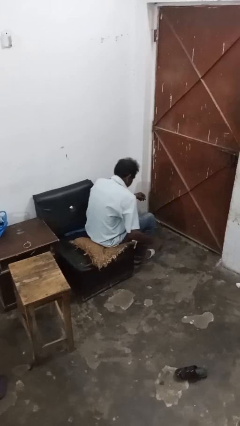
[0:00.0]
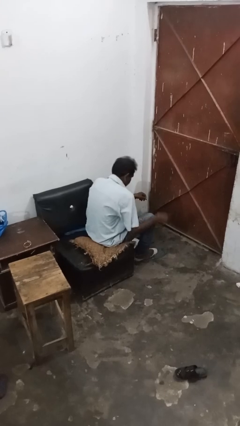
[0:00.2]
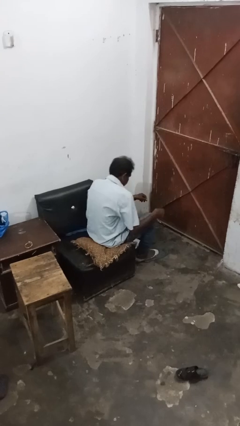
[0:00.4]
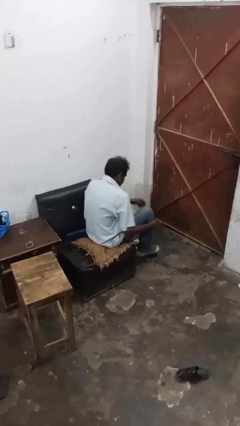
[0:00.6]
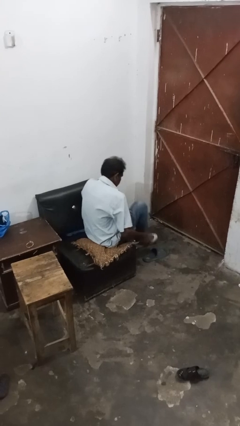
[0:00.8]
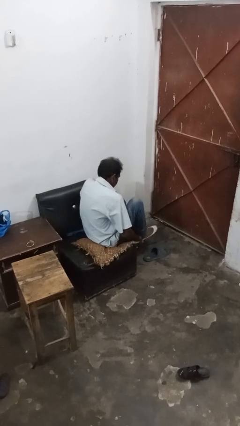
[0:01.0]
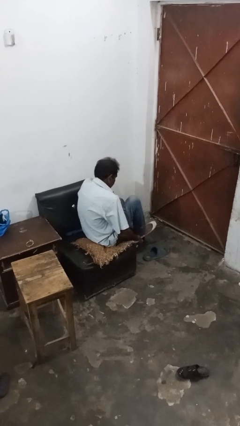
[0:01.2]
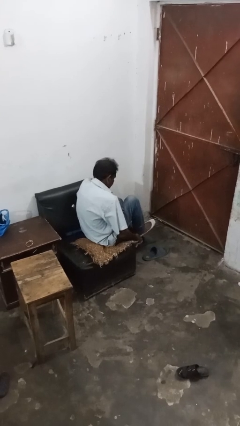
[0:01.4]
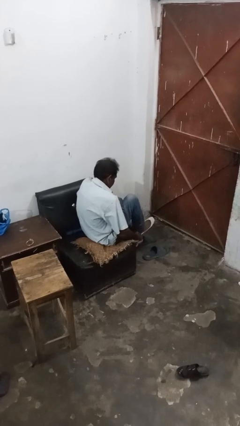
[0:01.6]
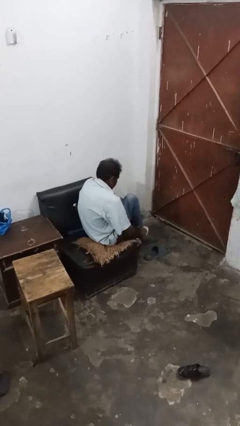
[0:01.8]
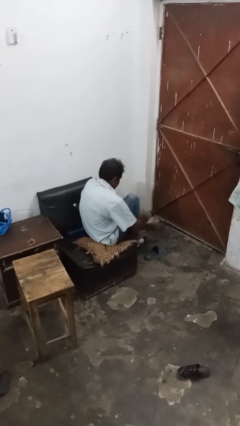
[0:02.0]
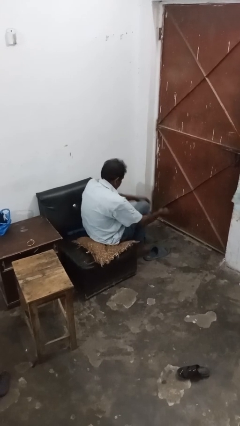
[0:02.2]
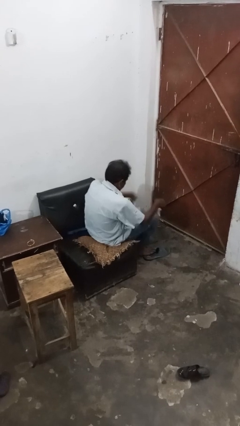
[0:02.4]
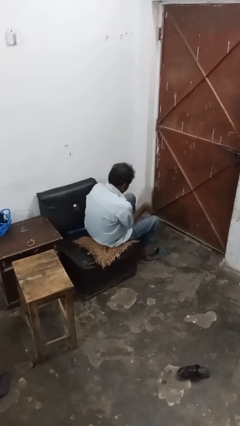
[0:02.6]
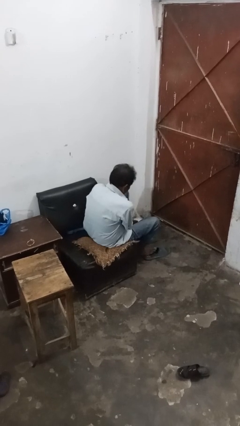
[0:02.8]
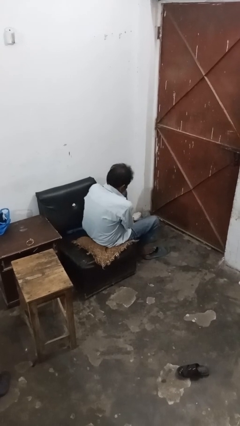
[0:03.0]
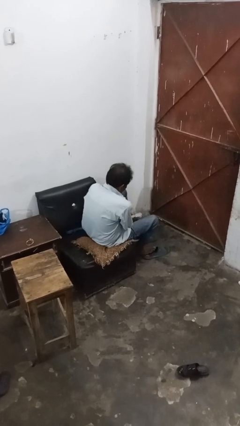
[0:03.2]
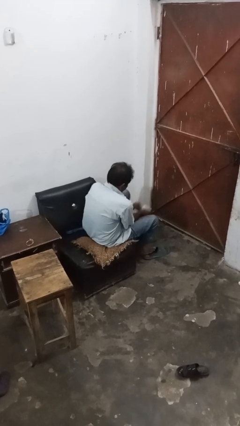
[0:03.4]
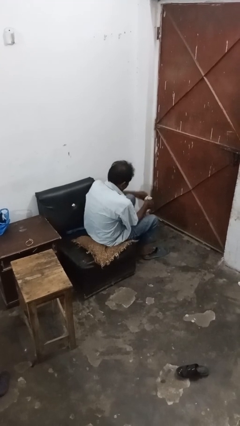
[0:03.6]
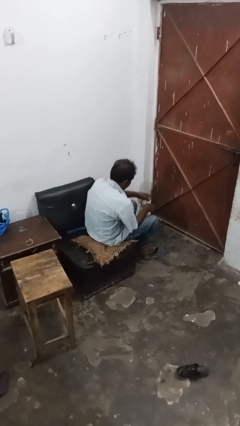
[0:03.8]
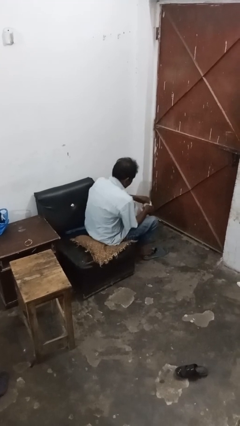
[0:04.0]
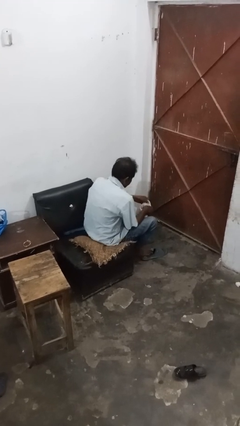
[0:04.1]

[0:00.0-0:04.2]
person takes off socks

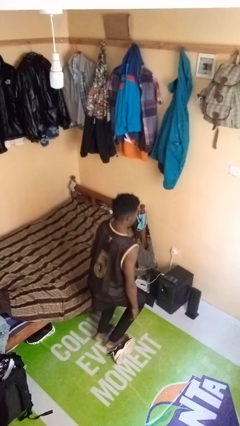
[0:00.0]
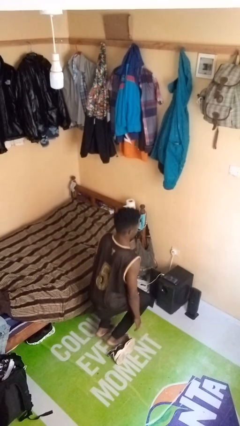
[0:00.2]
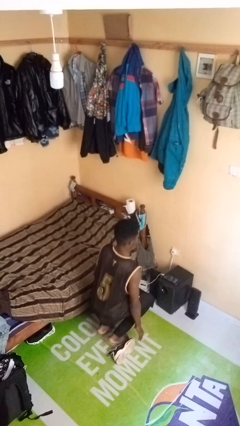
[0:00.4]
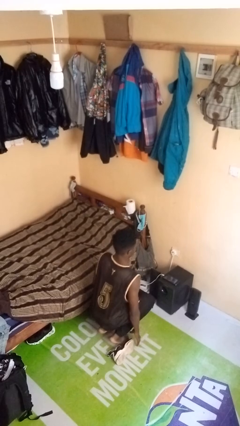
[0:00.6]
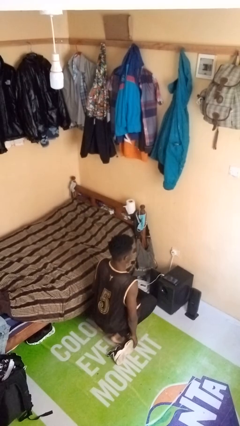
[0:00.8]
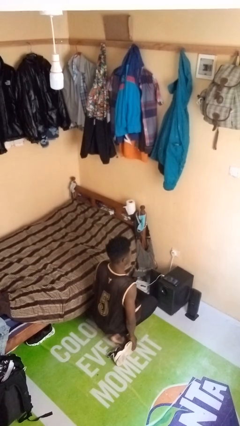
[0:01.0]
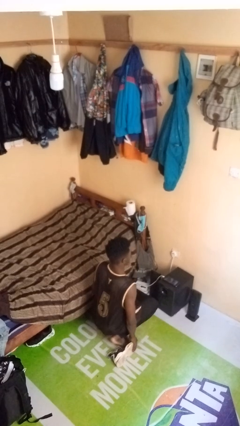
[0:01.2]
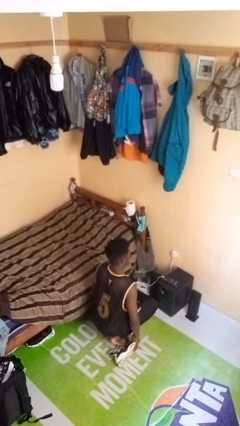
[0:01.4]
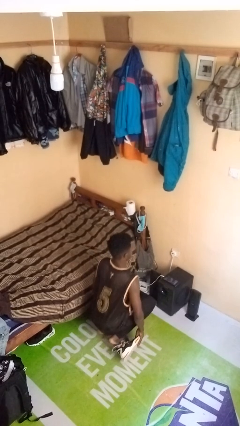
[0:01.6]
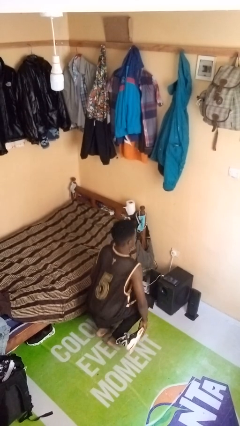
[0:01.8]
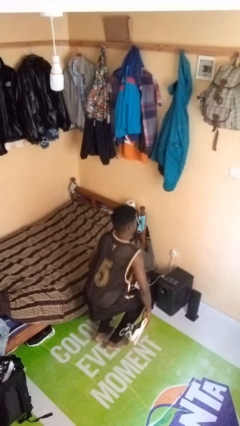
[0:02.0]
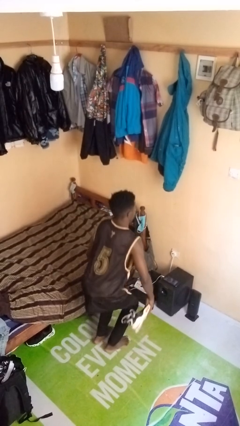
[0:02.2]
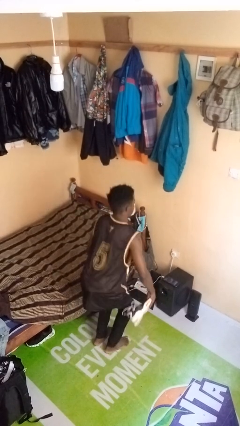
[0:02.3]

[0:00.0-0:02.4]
person picks up object from floor

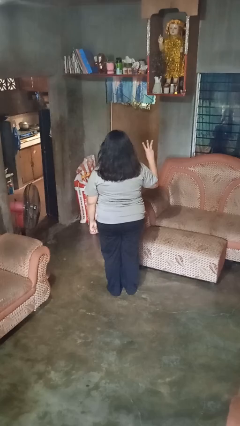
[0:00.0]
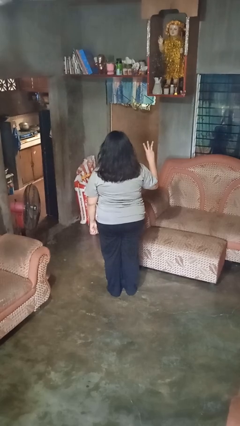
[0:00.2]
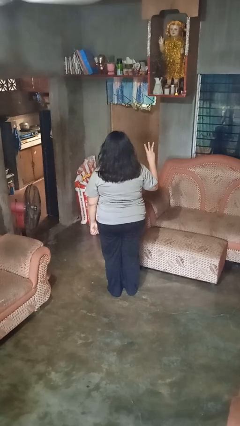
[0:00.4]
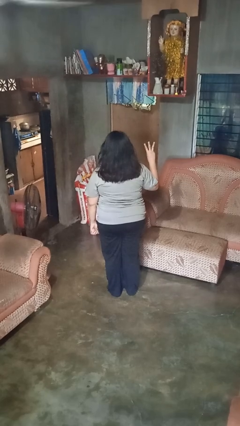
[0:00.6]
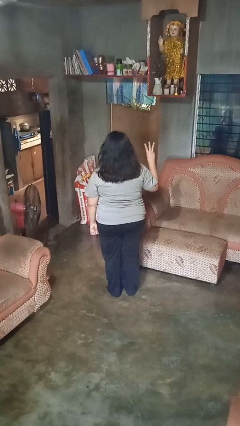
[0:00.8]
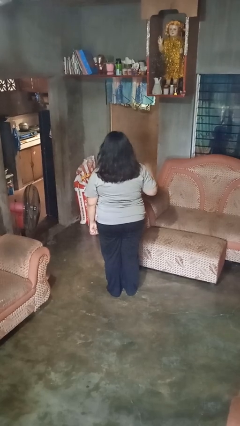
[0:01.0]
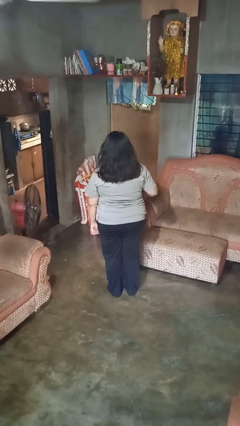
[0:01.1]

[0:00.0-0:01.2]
person gestures number three

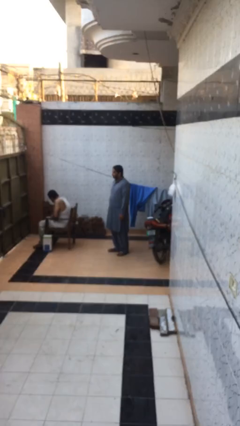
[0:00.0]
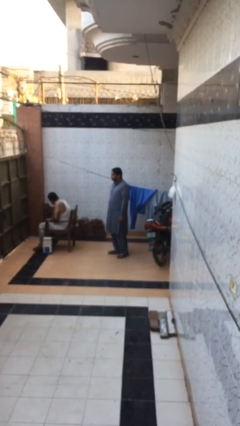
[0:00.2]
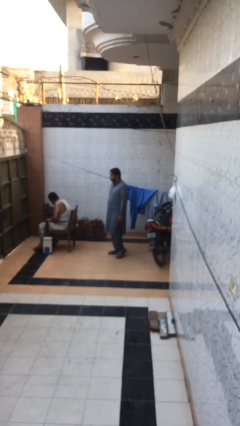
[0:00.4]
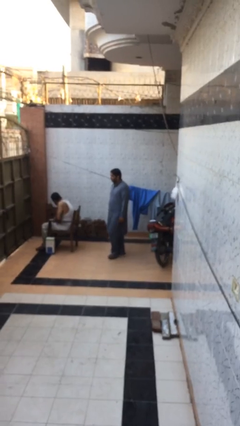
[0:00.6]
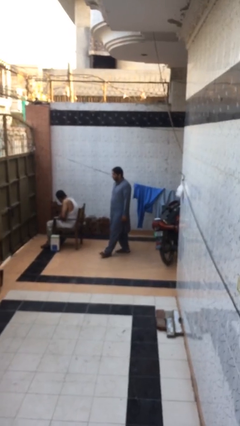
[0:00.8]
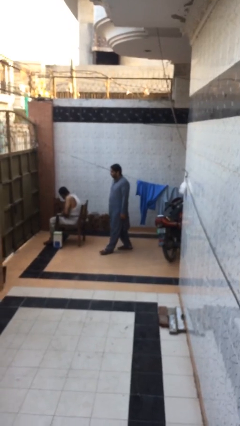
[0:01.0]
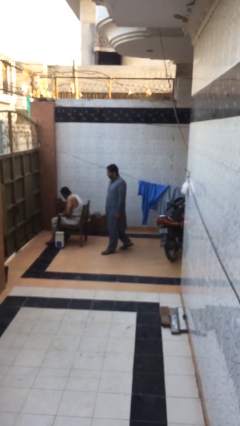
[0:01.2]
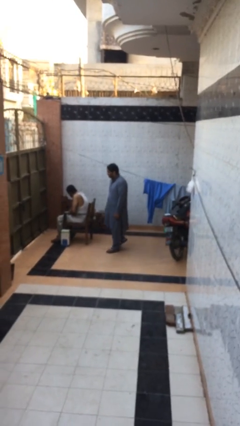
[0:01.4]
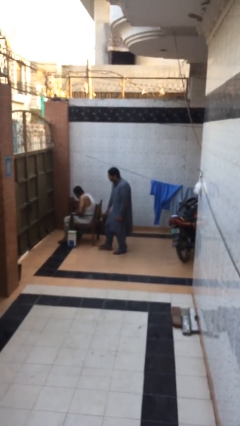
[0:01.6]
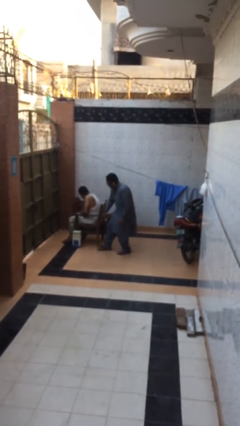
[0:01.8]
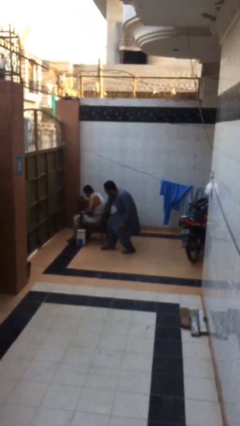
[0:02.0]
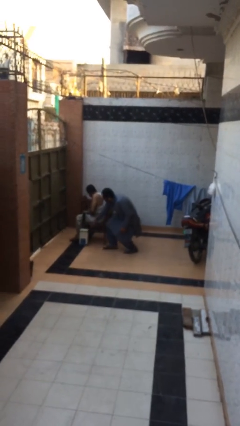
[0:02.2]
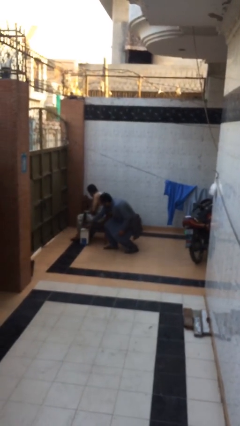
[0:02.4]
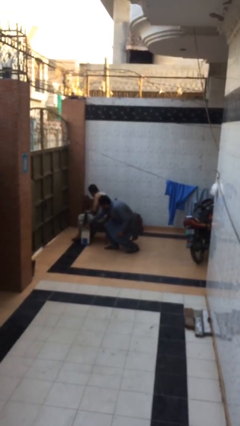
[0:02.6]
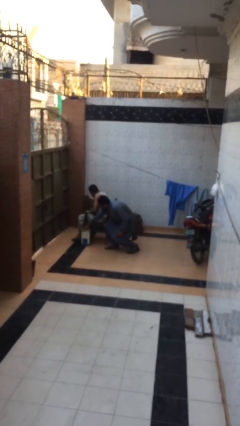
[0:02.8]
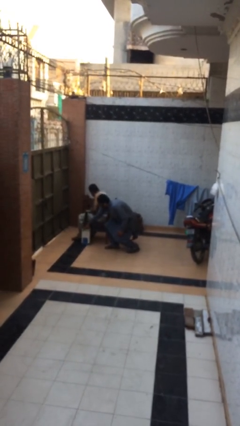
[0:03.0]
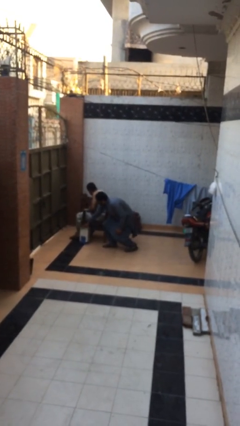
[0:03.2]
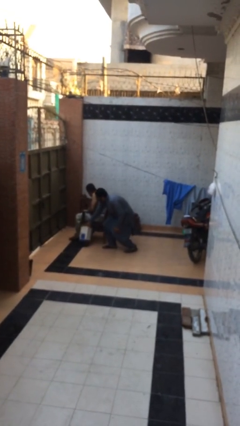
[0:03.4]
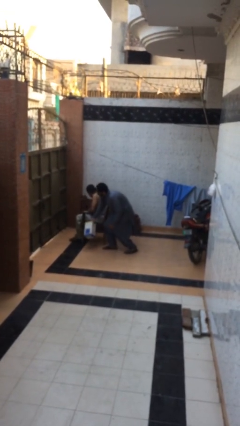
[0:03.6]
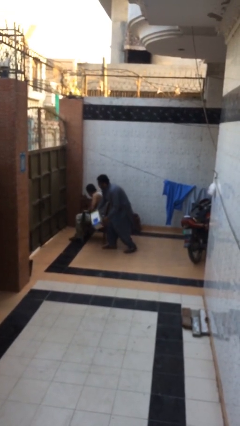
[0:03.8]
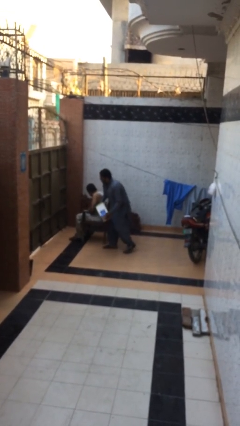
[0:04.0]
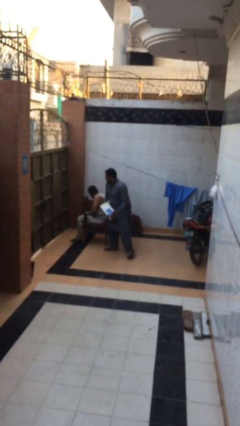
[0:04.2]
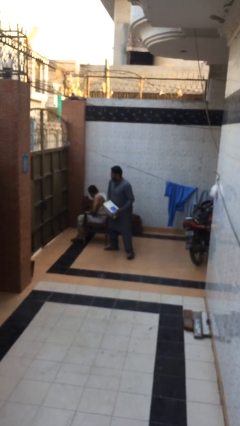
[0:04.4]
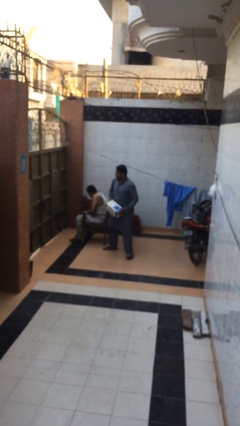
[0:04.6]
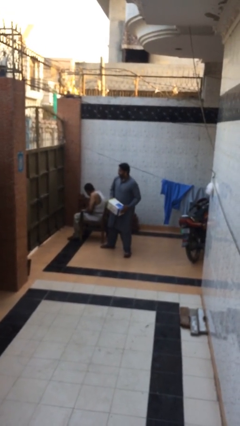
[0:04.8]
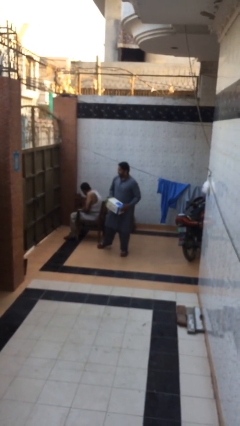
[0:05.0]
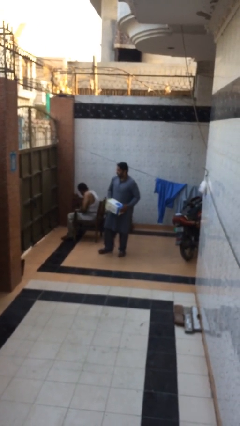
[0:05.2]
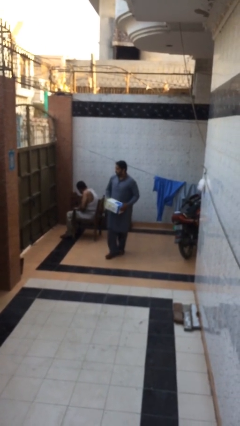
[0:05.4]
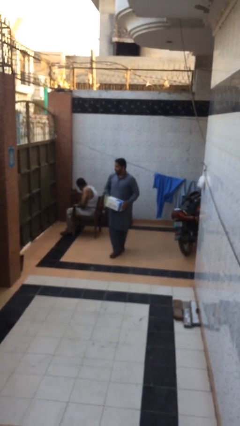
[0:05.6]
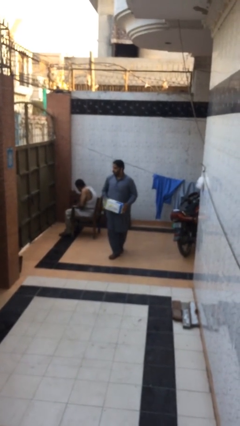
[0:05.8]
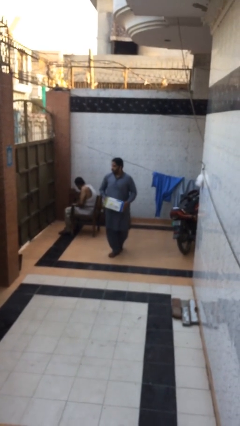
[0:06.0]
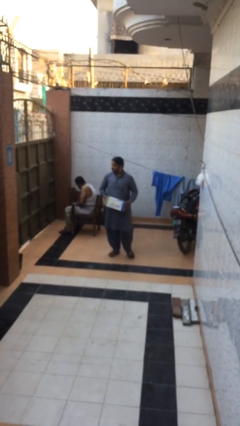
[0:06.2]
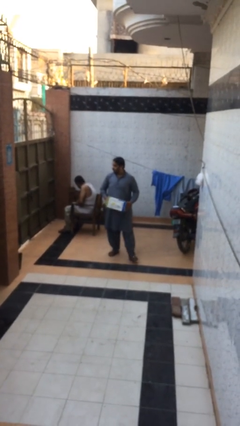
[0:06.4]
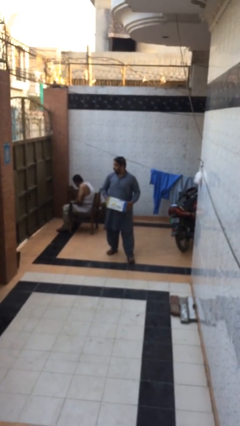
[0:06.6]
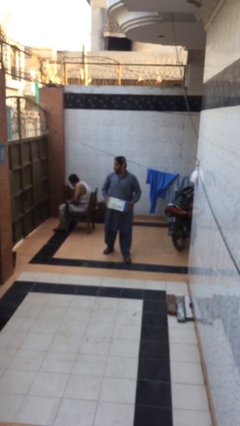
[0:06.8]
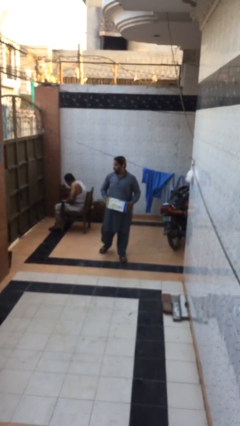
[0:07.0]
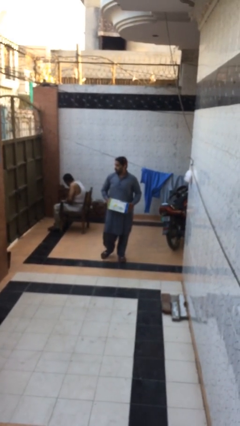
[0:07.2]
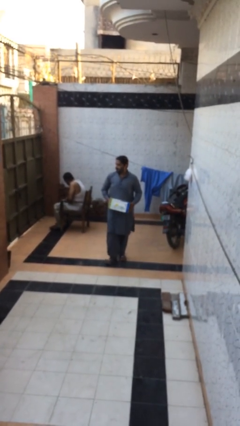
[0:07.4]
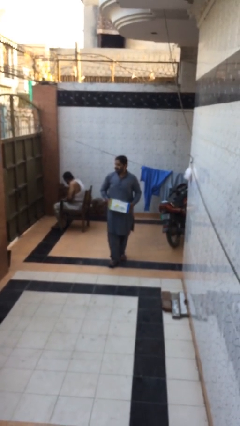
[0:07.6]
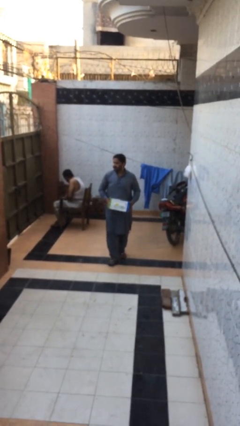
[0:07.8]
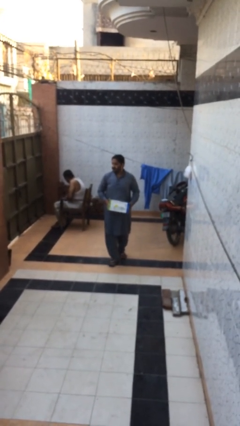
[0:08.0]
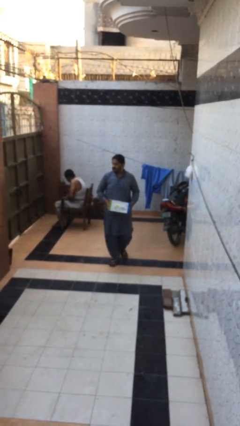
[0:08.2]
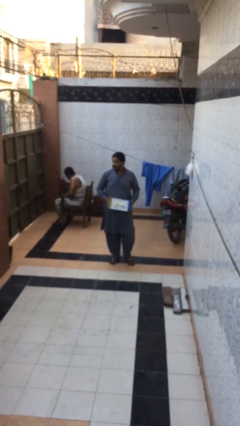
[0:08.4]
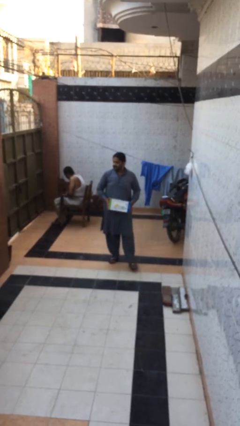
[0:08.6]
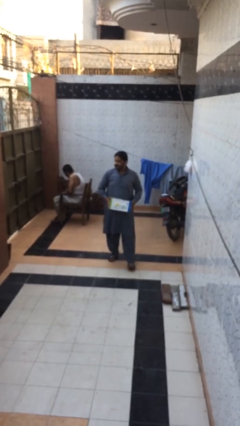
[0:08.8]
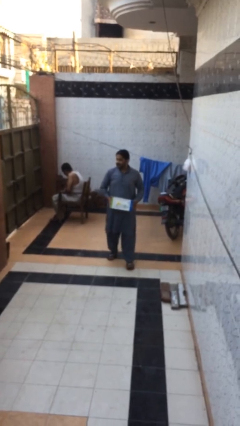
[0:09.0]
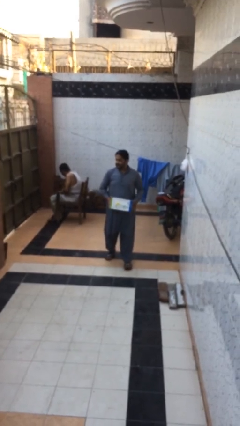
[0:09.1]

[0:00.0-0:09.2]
person steals object from person

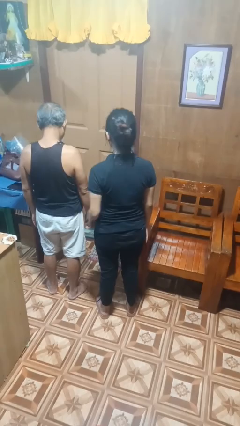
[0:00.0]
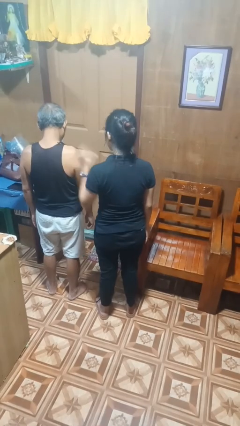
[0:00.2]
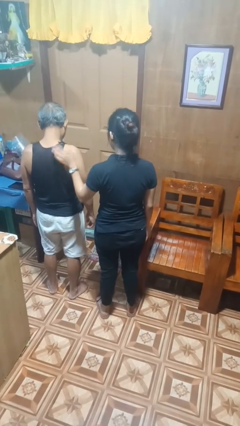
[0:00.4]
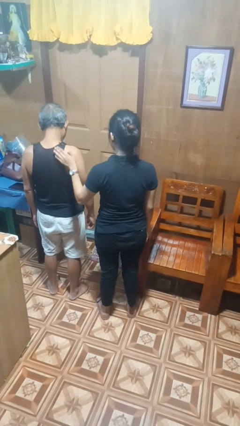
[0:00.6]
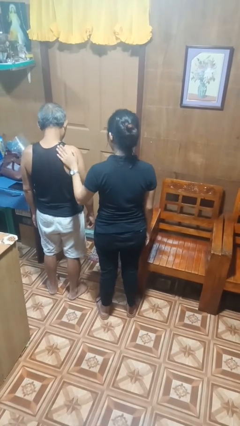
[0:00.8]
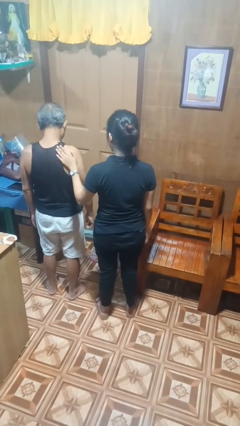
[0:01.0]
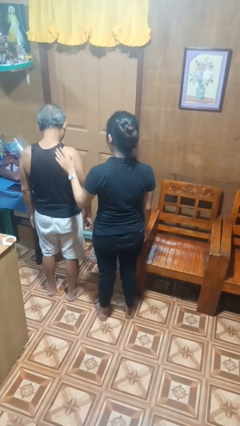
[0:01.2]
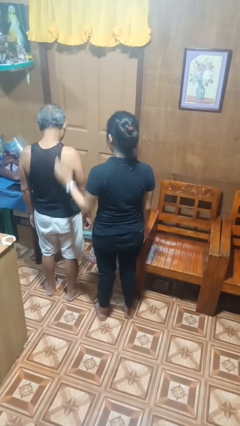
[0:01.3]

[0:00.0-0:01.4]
person pounds shoulders of person
